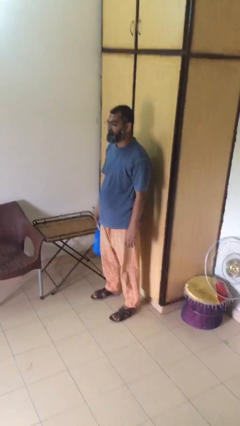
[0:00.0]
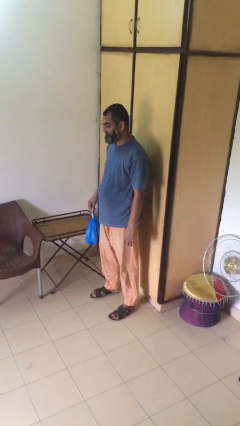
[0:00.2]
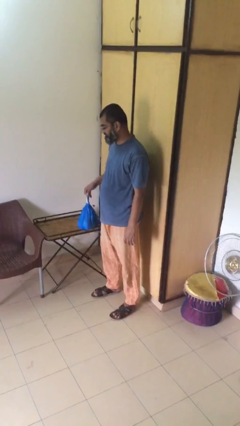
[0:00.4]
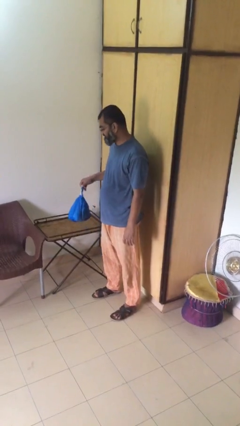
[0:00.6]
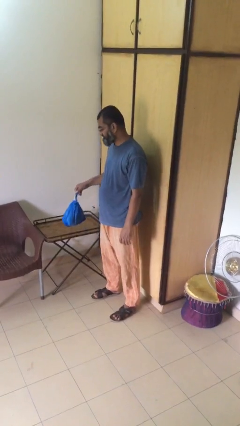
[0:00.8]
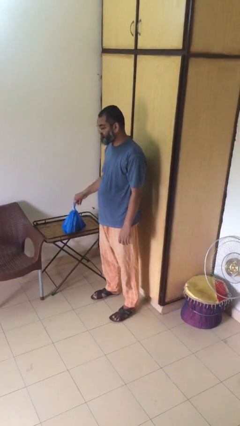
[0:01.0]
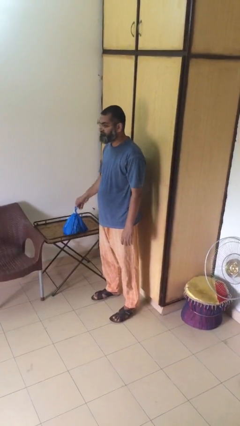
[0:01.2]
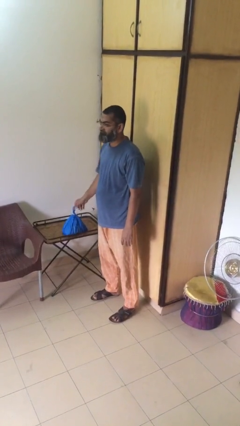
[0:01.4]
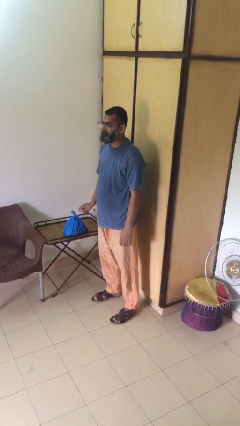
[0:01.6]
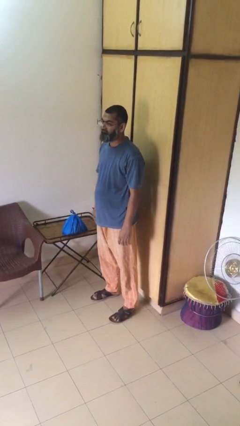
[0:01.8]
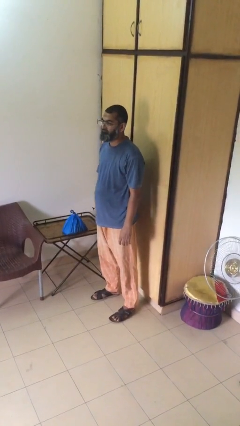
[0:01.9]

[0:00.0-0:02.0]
person puts down object on table

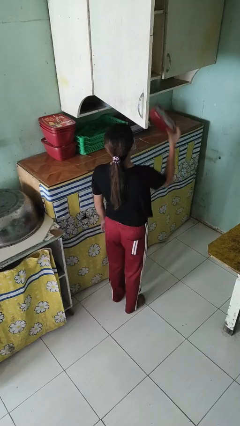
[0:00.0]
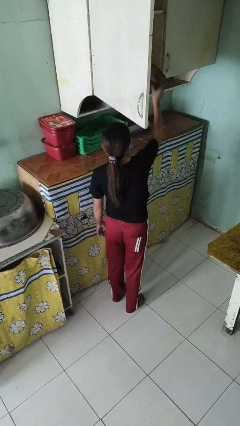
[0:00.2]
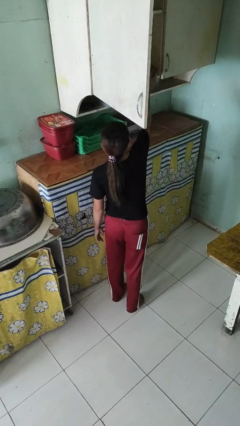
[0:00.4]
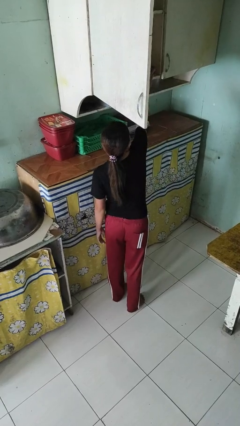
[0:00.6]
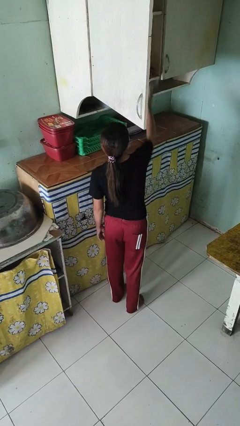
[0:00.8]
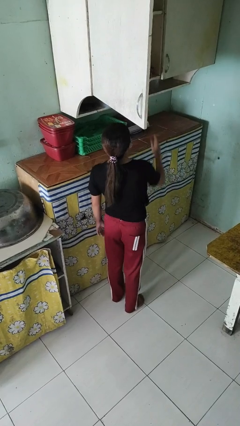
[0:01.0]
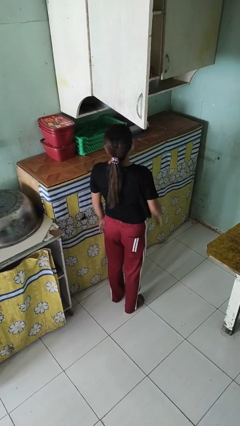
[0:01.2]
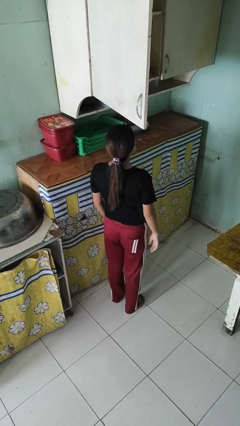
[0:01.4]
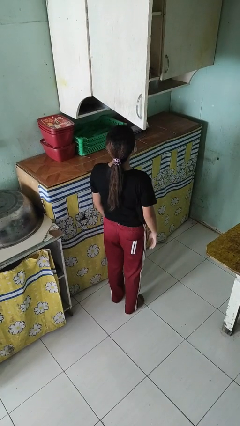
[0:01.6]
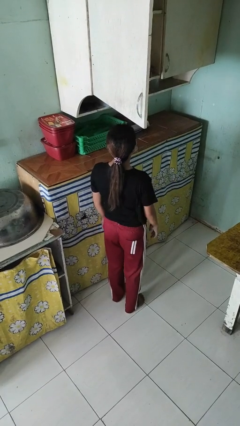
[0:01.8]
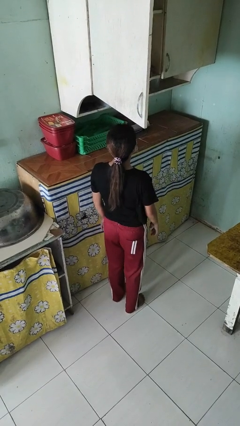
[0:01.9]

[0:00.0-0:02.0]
person puts object in cabinet

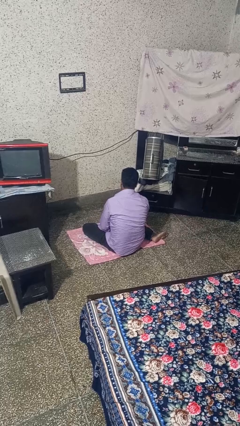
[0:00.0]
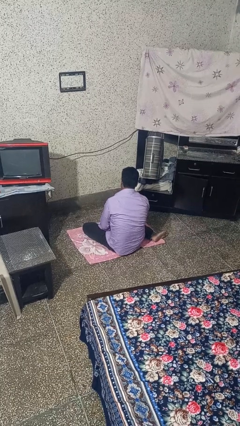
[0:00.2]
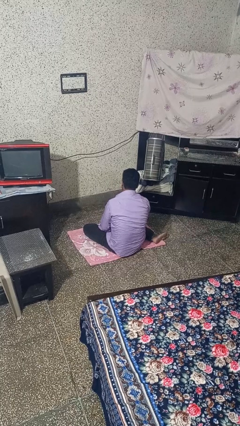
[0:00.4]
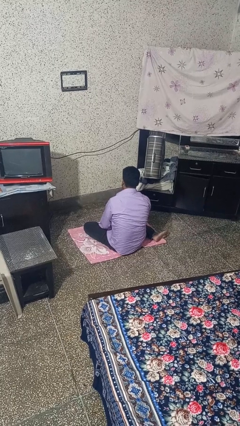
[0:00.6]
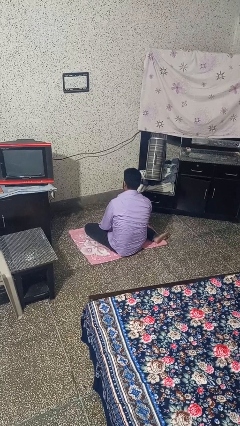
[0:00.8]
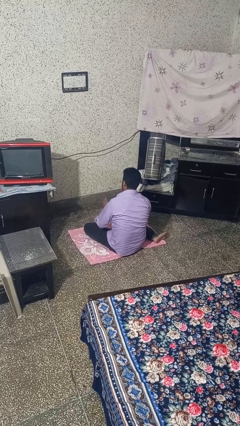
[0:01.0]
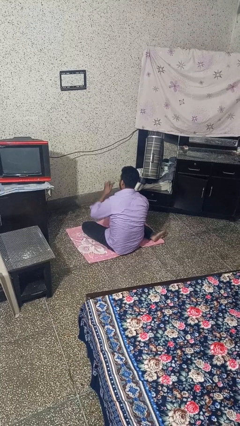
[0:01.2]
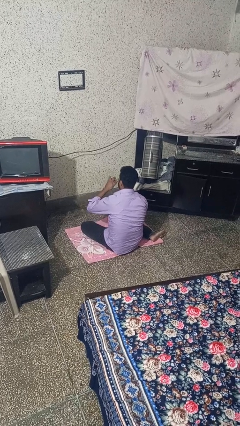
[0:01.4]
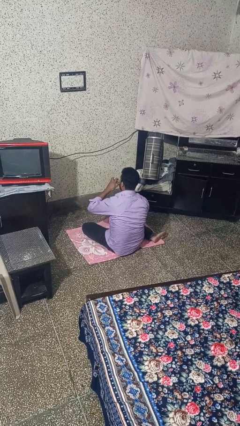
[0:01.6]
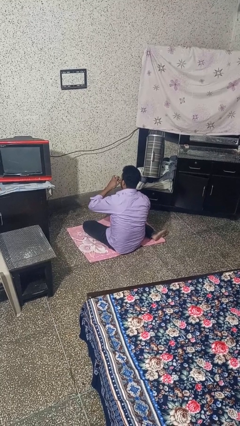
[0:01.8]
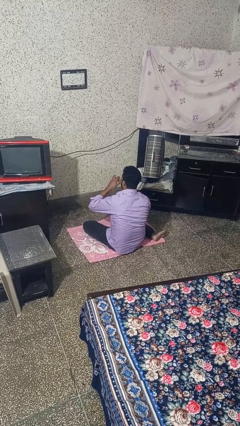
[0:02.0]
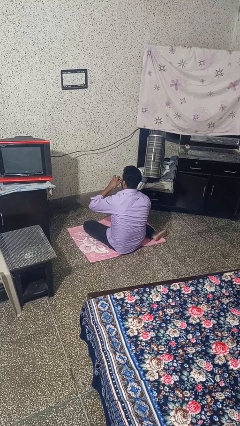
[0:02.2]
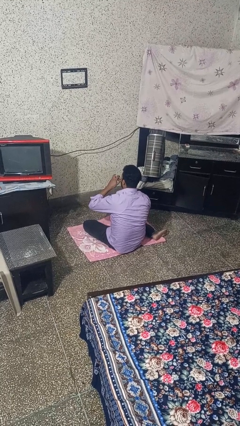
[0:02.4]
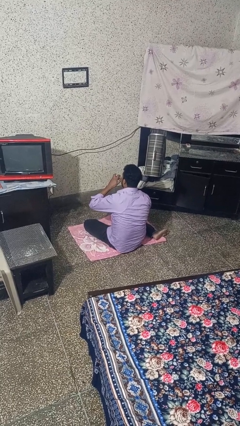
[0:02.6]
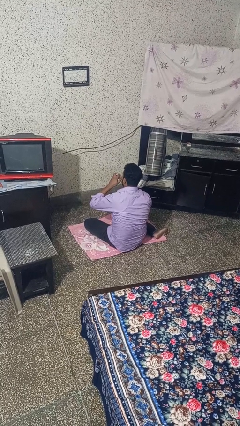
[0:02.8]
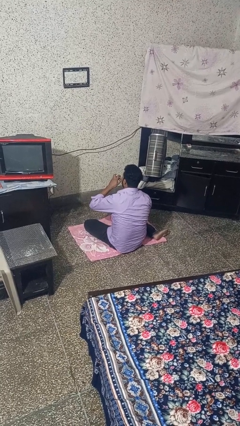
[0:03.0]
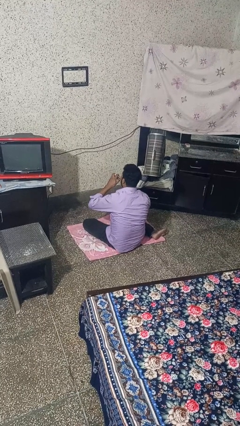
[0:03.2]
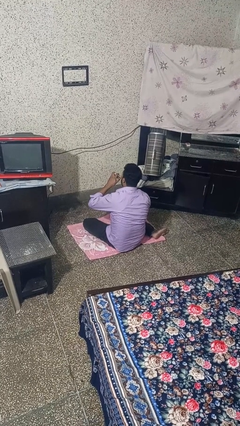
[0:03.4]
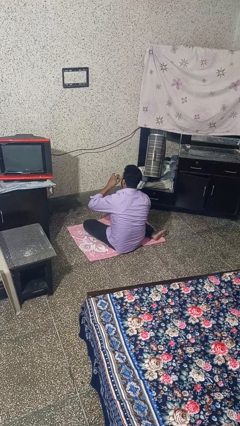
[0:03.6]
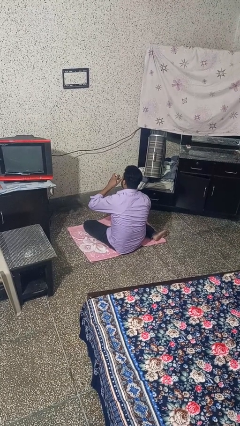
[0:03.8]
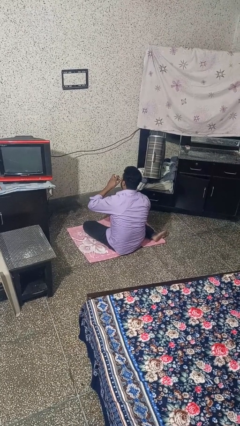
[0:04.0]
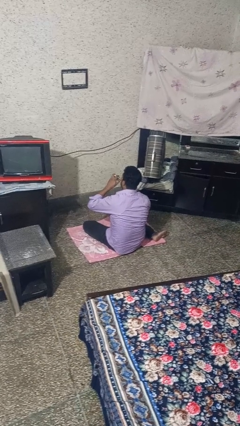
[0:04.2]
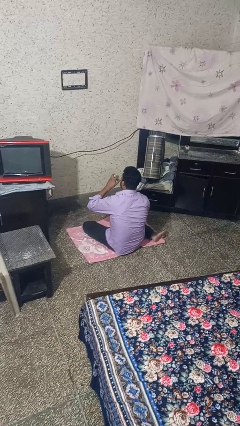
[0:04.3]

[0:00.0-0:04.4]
person vapes

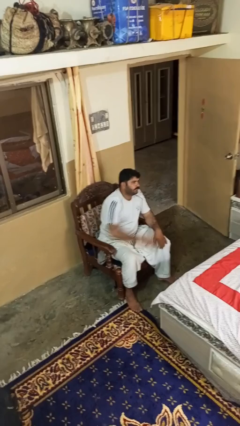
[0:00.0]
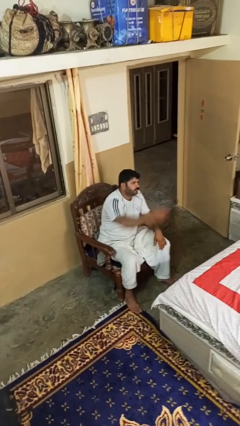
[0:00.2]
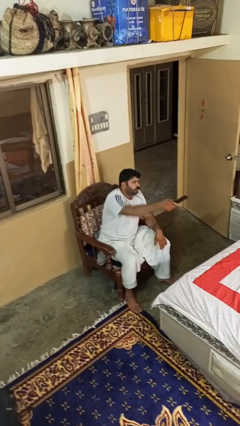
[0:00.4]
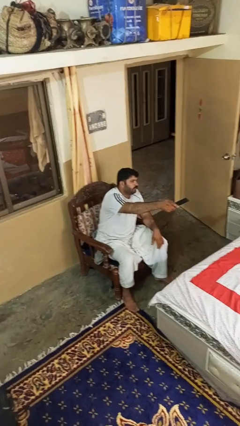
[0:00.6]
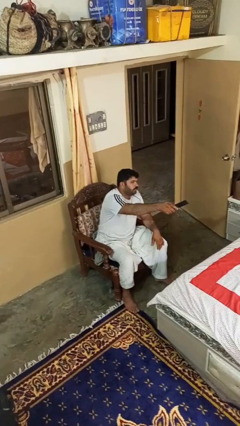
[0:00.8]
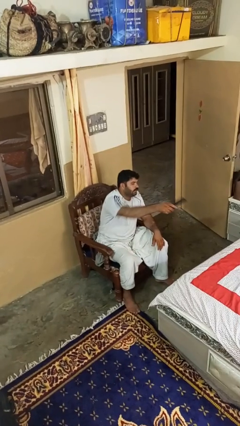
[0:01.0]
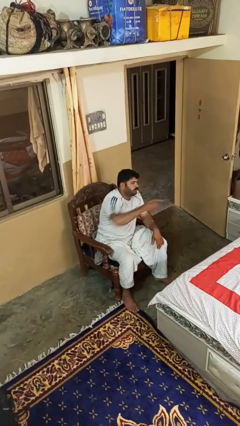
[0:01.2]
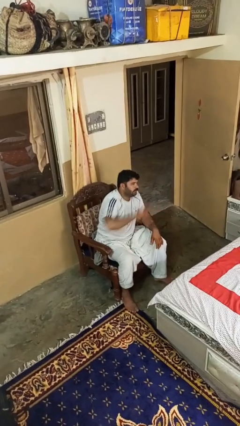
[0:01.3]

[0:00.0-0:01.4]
person uses television remote

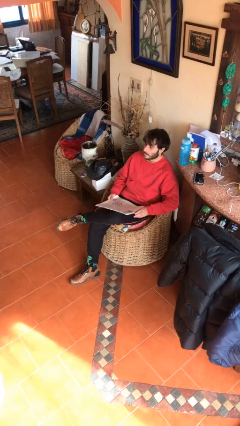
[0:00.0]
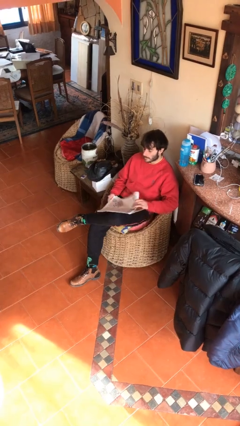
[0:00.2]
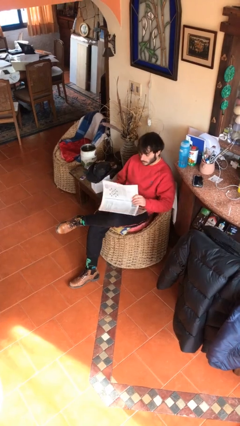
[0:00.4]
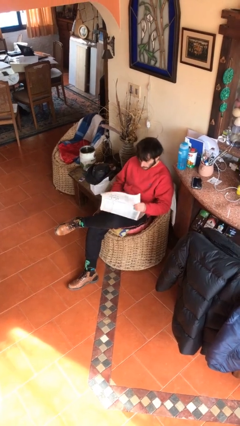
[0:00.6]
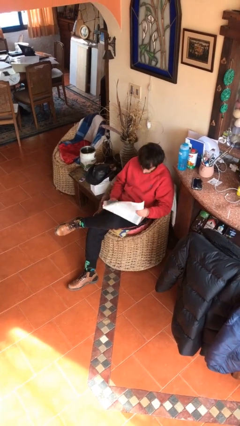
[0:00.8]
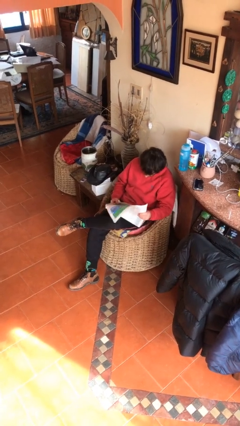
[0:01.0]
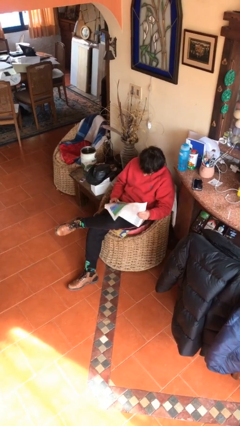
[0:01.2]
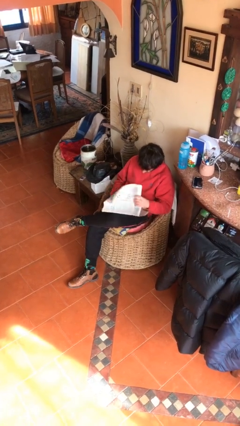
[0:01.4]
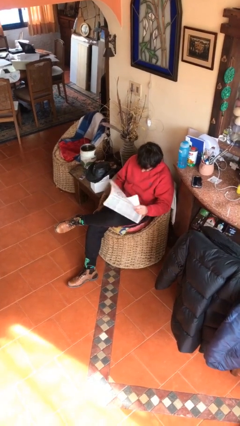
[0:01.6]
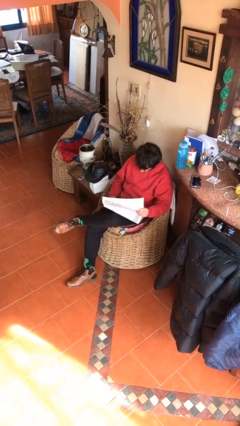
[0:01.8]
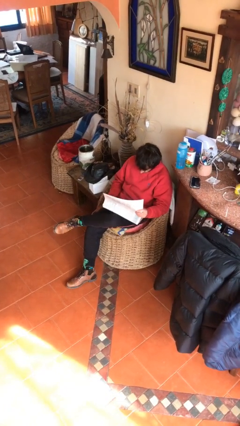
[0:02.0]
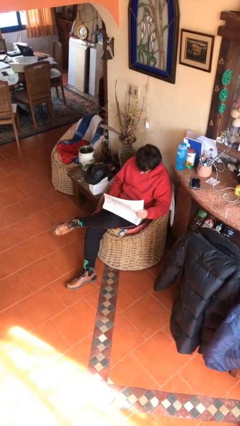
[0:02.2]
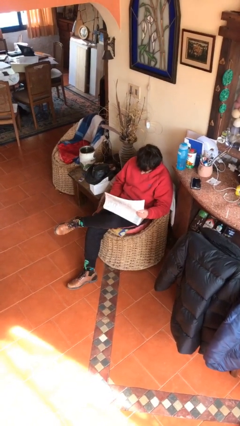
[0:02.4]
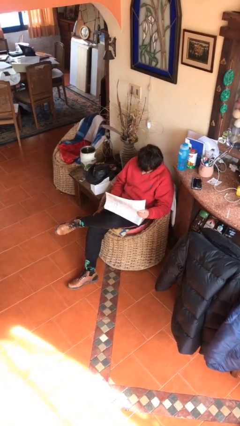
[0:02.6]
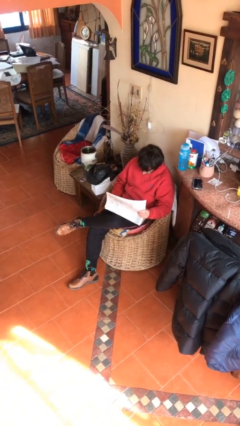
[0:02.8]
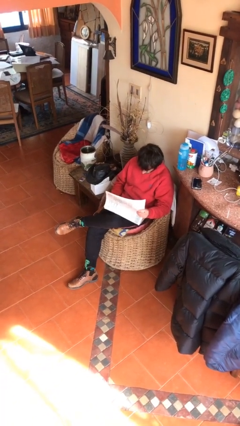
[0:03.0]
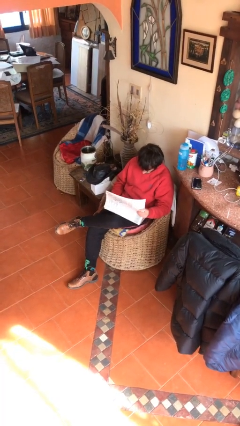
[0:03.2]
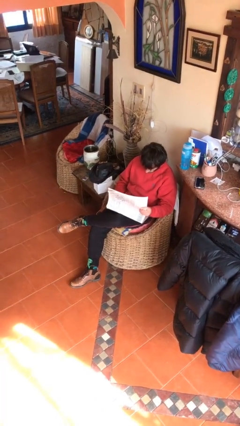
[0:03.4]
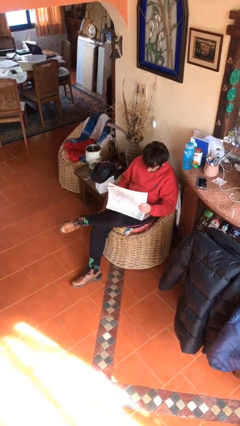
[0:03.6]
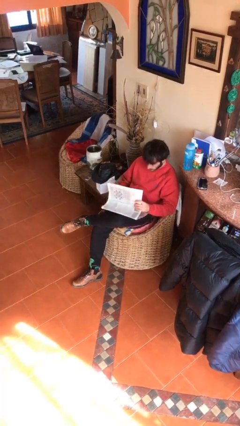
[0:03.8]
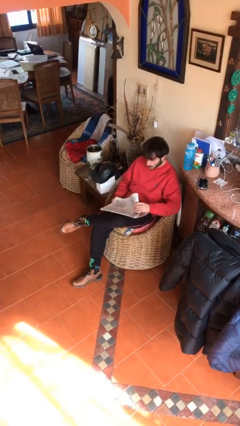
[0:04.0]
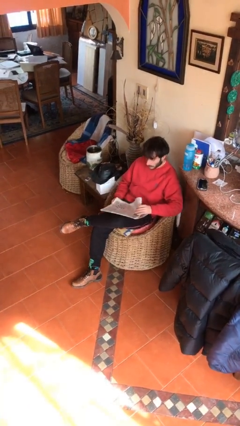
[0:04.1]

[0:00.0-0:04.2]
person reads newspaper

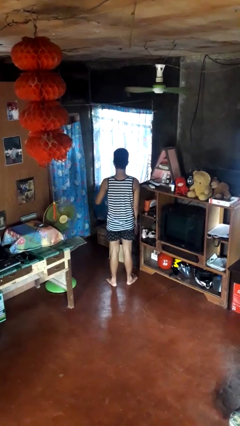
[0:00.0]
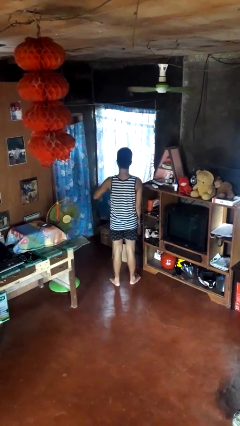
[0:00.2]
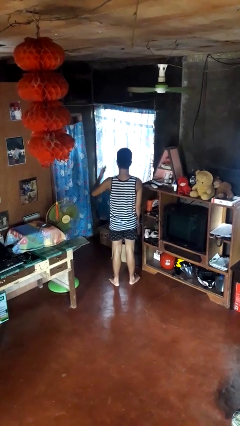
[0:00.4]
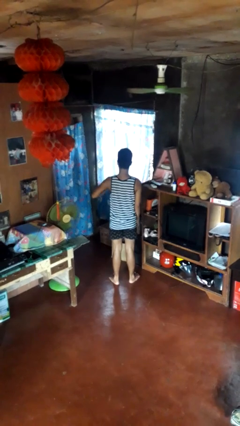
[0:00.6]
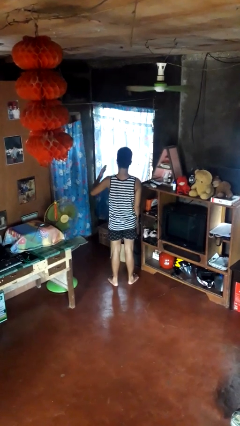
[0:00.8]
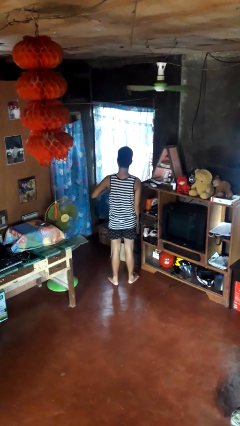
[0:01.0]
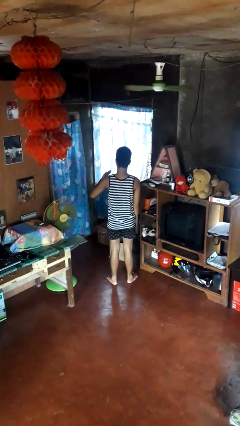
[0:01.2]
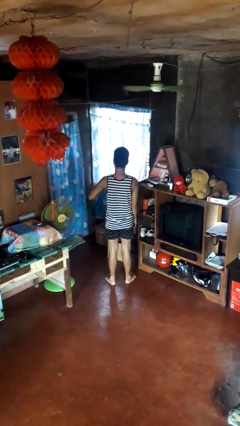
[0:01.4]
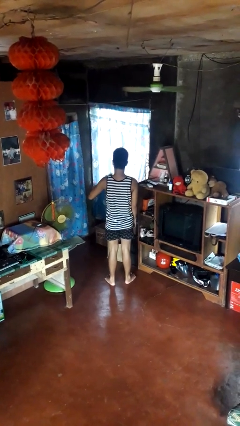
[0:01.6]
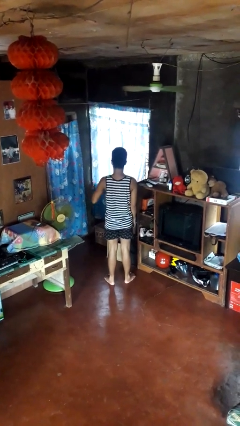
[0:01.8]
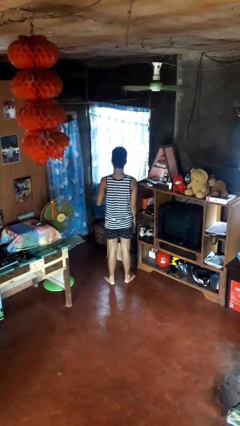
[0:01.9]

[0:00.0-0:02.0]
person drums on chest

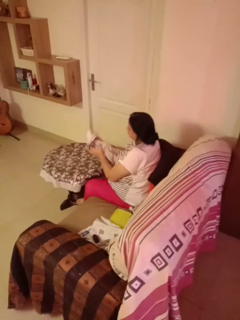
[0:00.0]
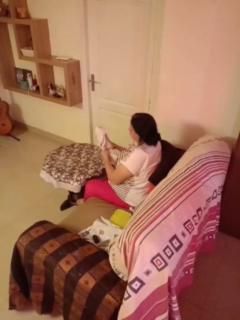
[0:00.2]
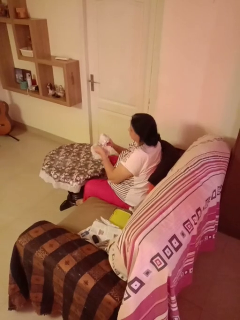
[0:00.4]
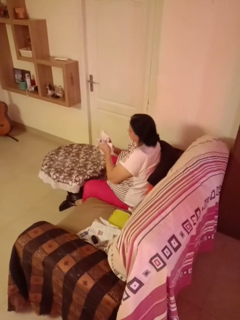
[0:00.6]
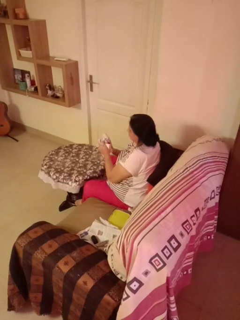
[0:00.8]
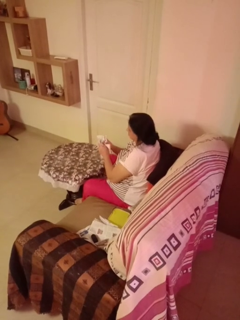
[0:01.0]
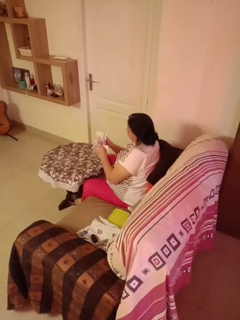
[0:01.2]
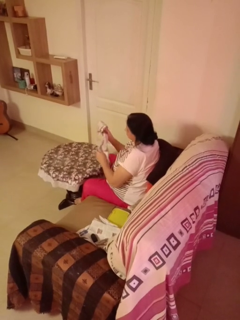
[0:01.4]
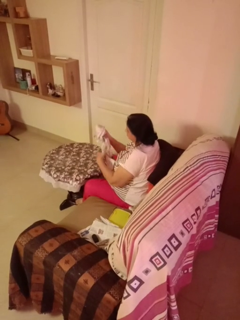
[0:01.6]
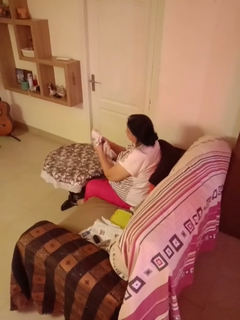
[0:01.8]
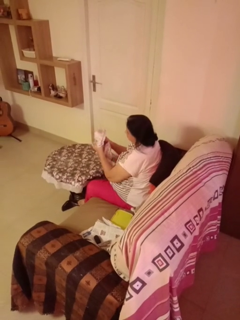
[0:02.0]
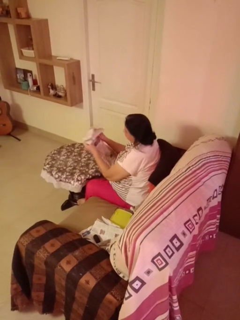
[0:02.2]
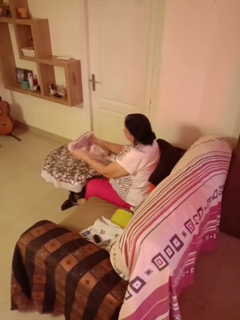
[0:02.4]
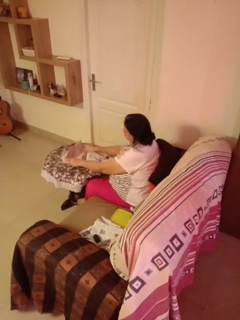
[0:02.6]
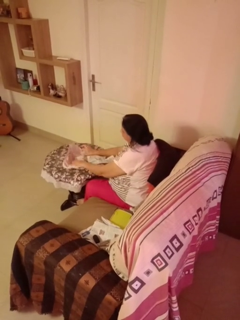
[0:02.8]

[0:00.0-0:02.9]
person crumples paper
